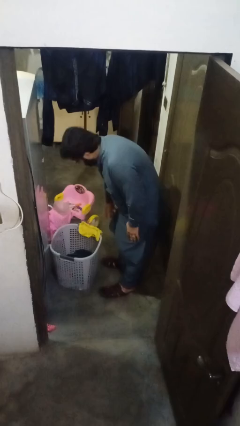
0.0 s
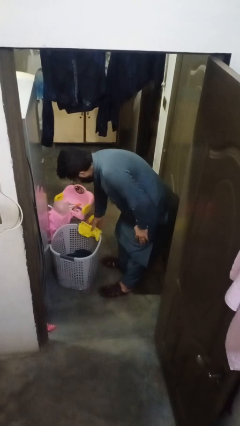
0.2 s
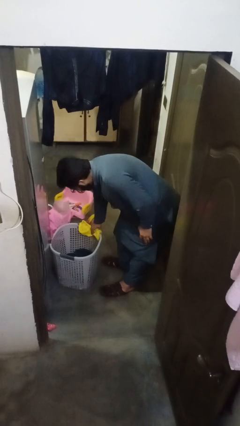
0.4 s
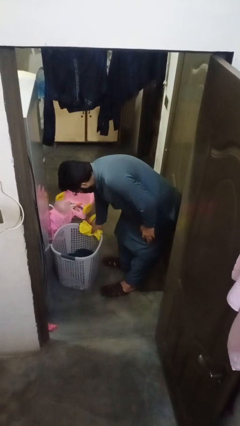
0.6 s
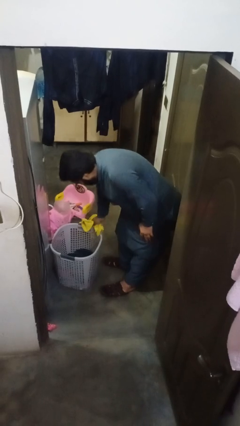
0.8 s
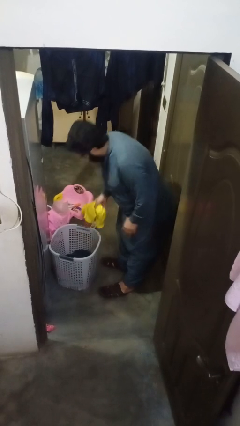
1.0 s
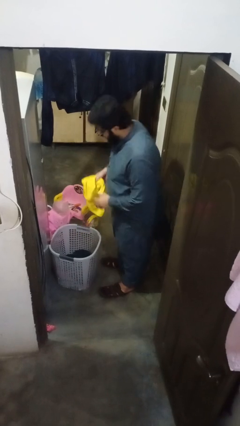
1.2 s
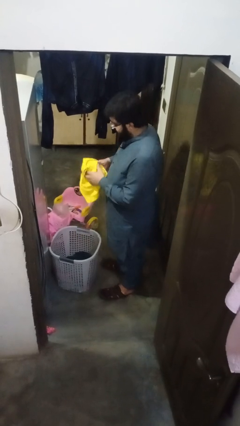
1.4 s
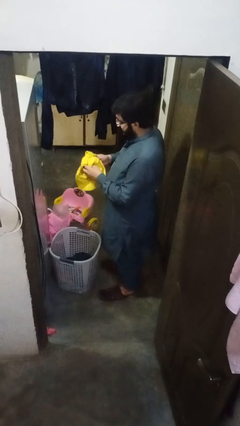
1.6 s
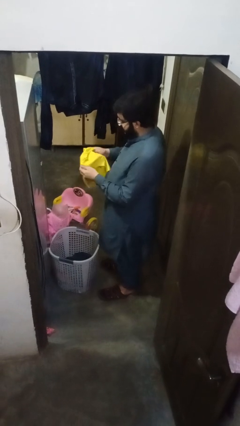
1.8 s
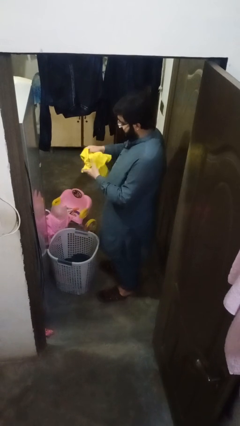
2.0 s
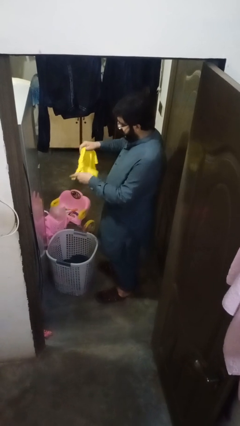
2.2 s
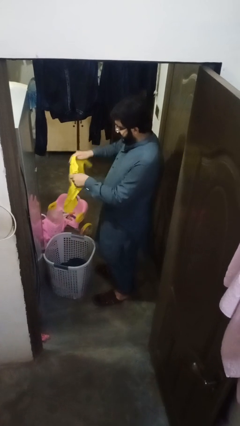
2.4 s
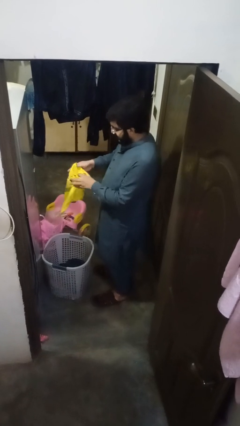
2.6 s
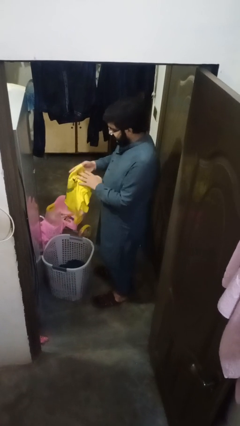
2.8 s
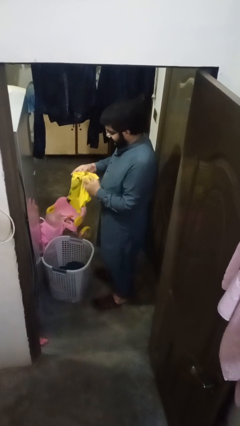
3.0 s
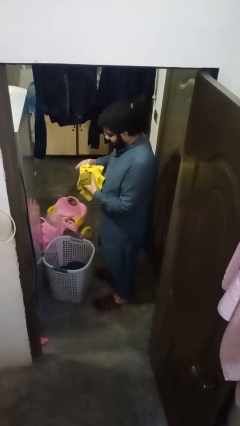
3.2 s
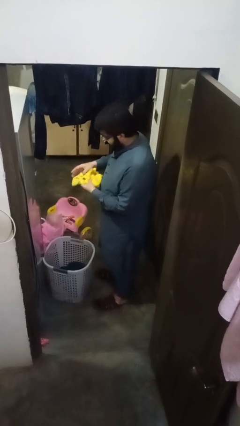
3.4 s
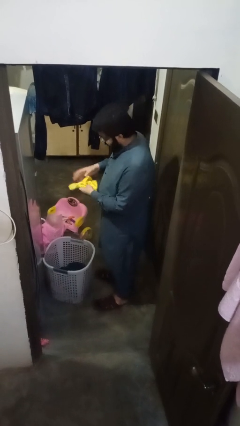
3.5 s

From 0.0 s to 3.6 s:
person folds shirt

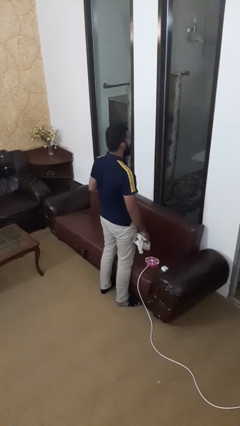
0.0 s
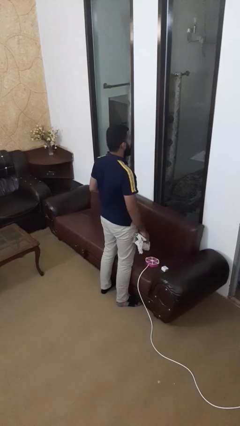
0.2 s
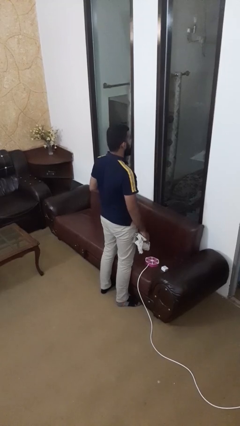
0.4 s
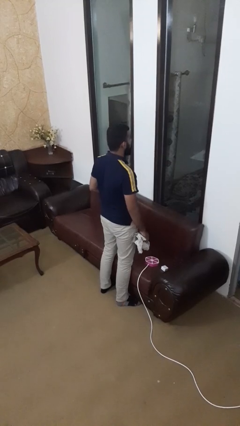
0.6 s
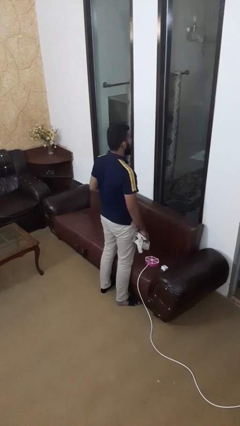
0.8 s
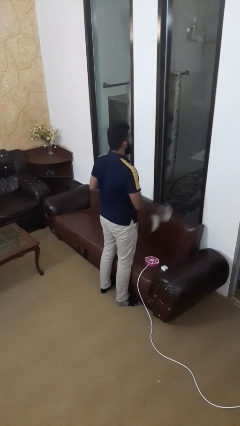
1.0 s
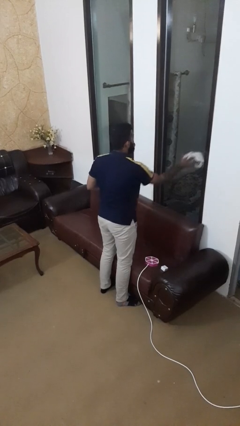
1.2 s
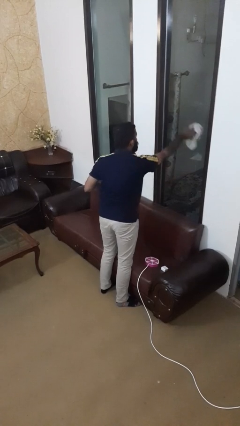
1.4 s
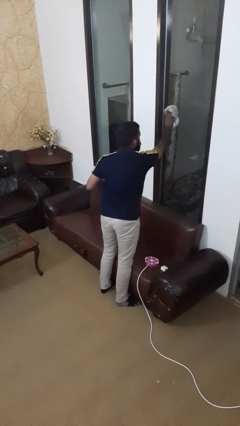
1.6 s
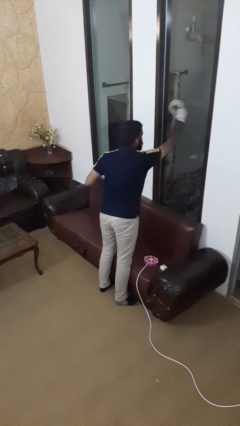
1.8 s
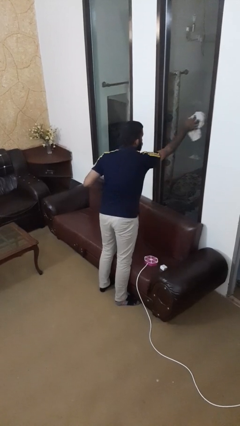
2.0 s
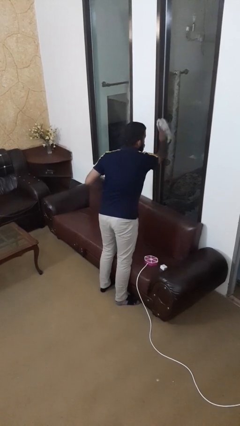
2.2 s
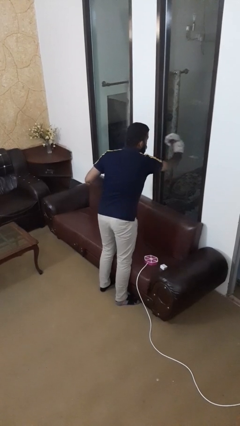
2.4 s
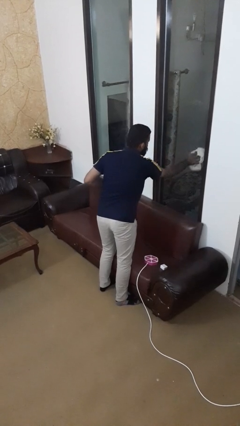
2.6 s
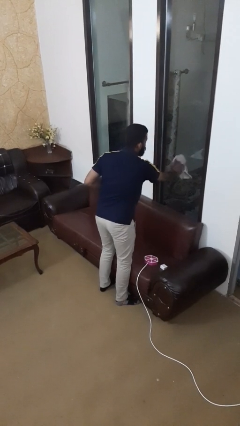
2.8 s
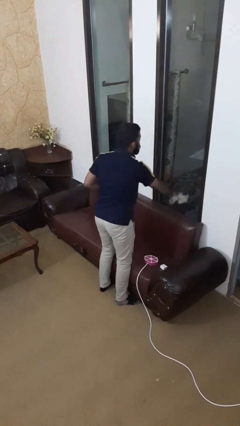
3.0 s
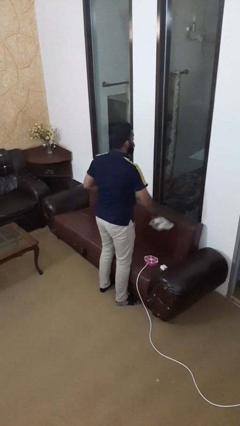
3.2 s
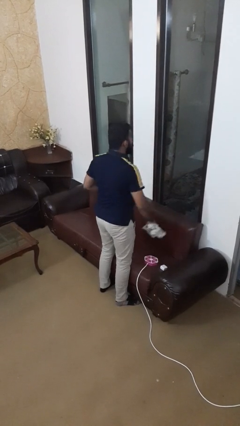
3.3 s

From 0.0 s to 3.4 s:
person washes window

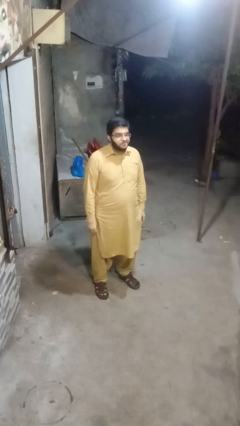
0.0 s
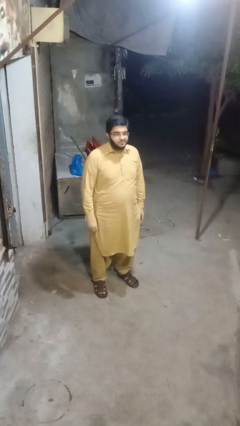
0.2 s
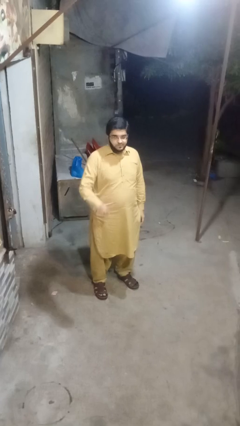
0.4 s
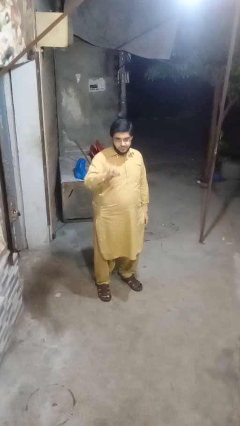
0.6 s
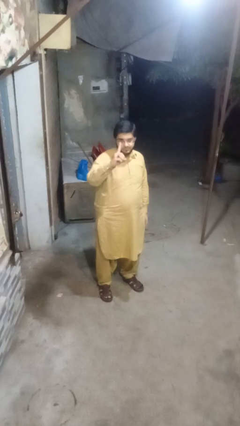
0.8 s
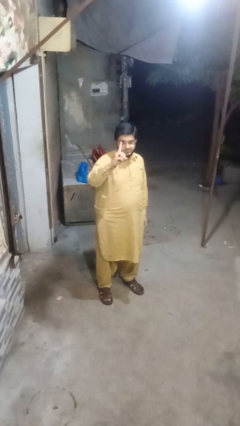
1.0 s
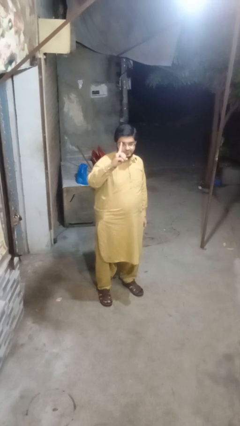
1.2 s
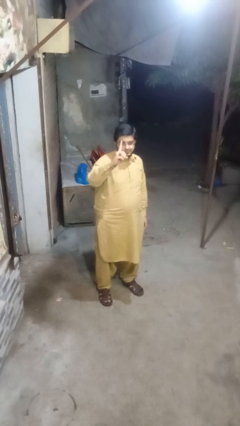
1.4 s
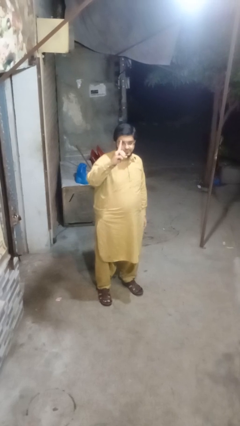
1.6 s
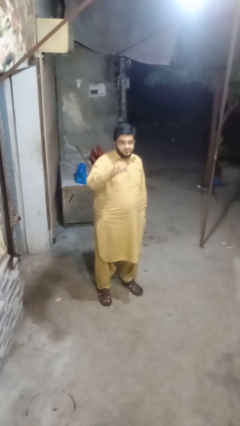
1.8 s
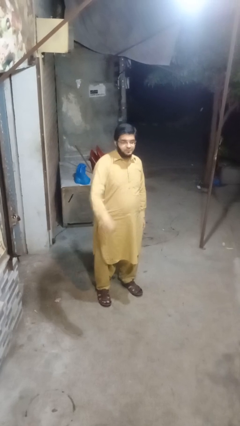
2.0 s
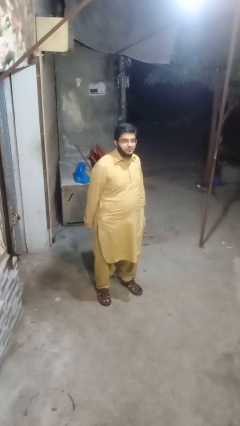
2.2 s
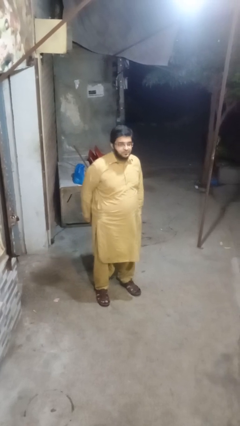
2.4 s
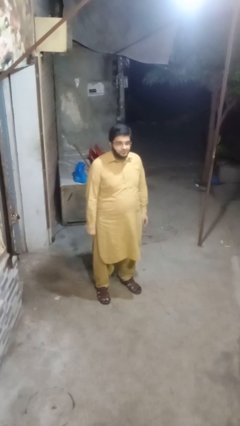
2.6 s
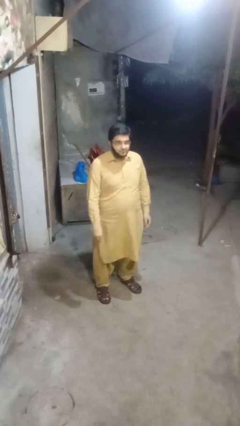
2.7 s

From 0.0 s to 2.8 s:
person gestures number one

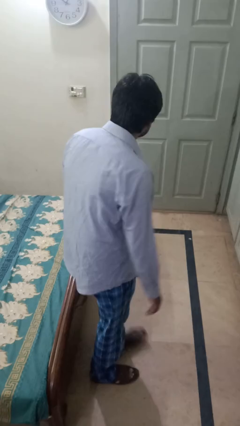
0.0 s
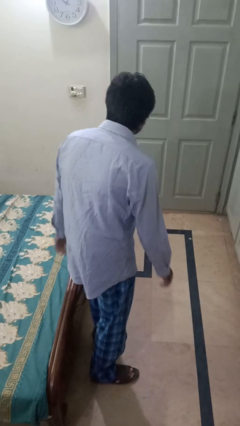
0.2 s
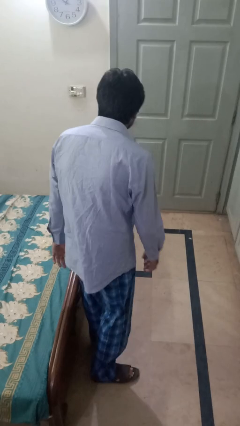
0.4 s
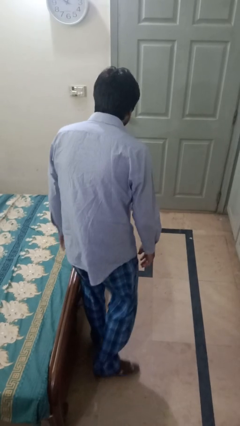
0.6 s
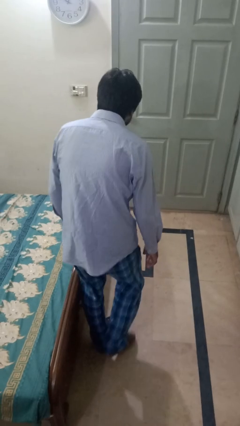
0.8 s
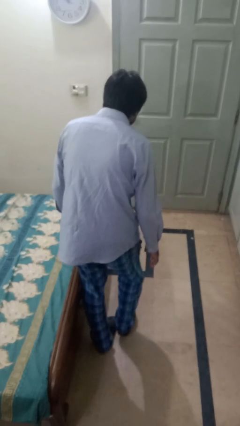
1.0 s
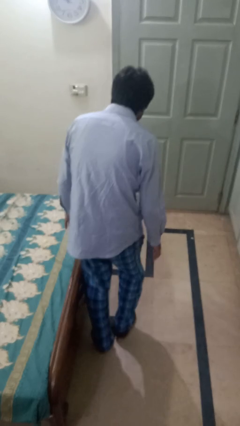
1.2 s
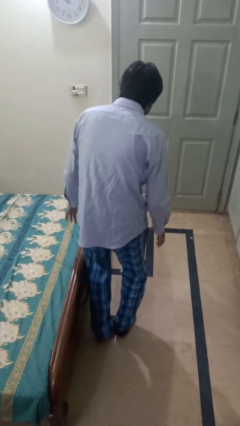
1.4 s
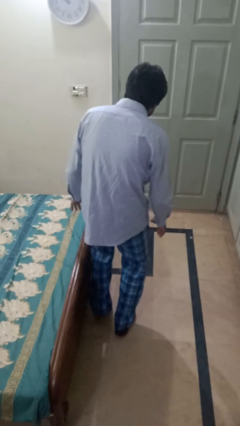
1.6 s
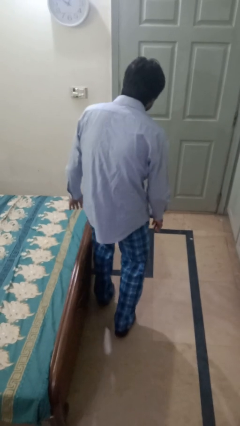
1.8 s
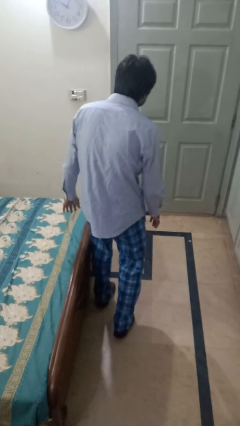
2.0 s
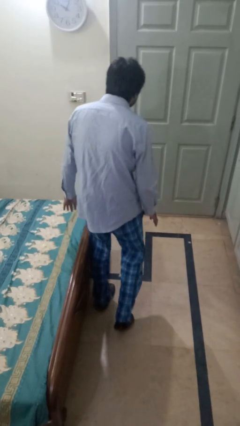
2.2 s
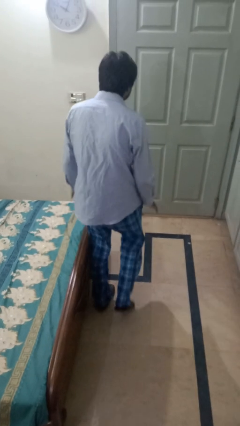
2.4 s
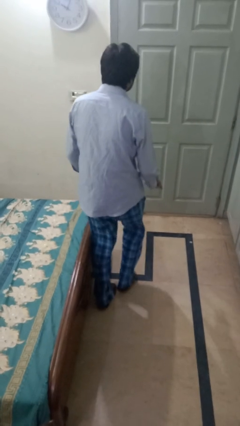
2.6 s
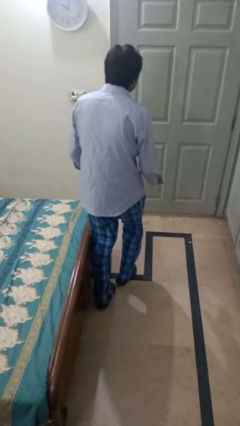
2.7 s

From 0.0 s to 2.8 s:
person walks tiptoe

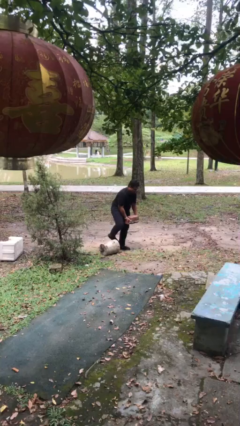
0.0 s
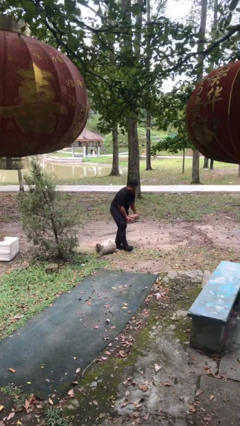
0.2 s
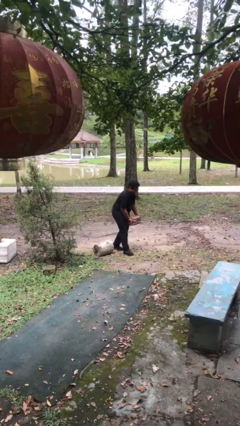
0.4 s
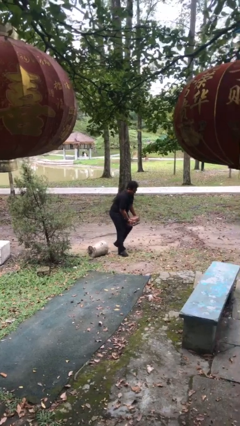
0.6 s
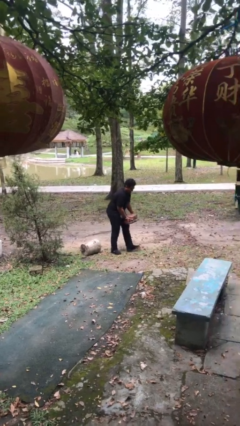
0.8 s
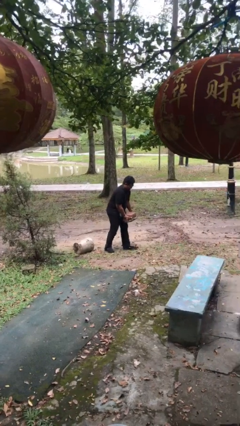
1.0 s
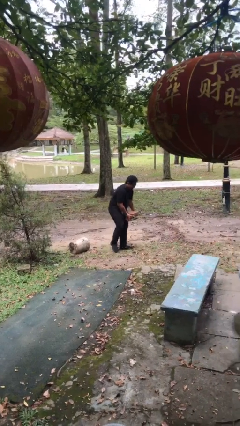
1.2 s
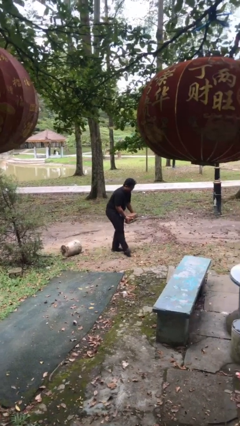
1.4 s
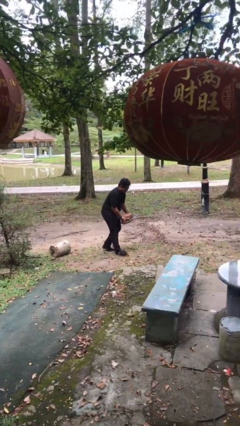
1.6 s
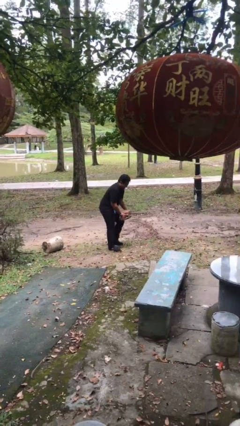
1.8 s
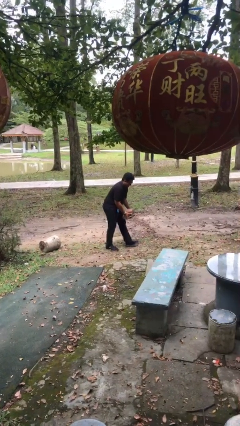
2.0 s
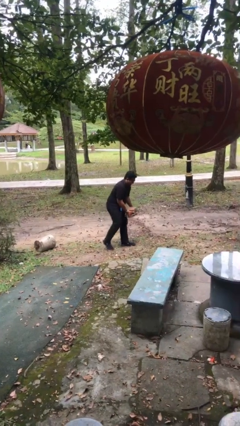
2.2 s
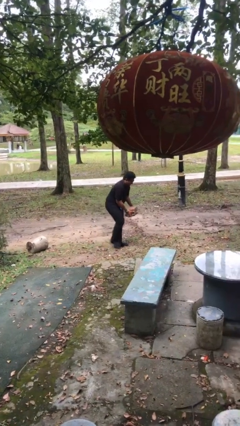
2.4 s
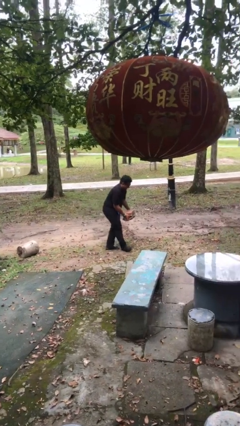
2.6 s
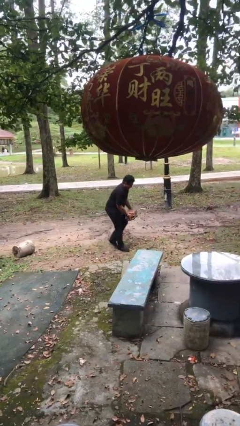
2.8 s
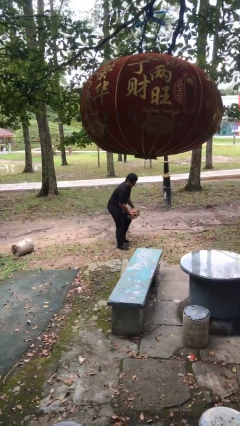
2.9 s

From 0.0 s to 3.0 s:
person carries heavy object

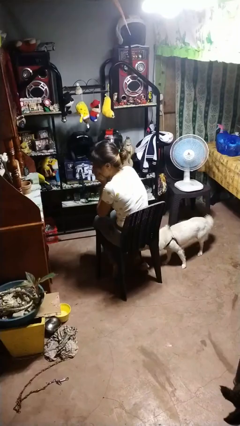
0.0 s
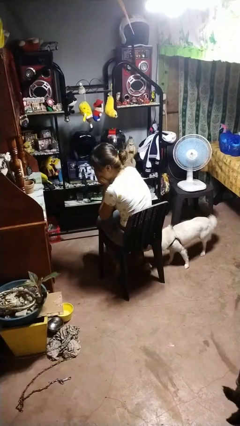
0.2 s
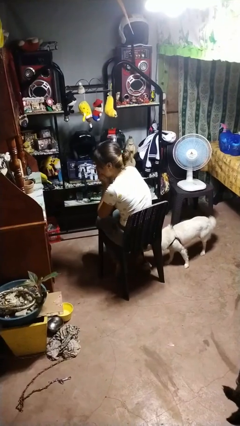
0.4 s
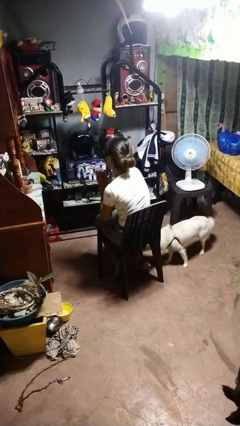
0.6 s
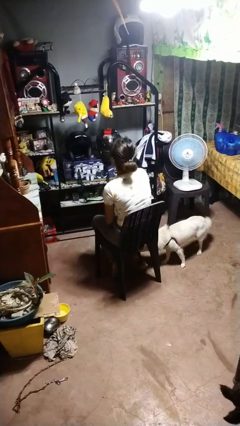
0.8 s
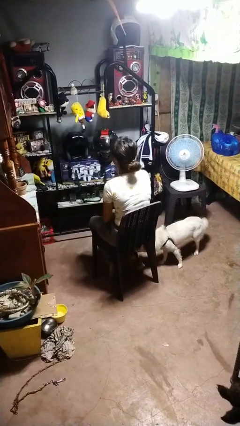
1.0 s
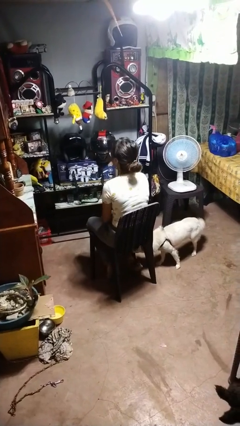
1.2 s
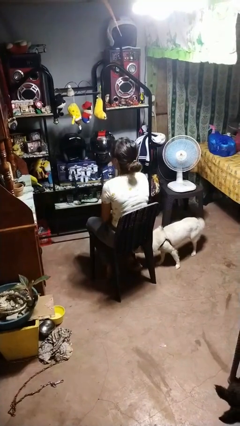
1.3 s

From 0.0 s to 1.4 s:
person sneezes into hand

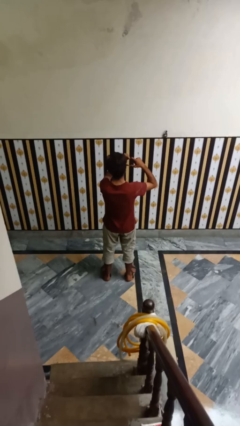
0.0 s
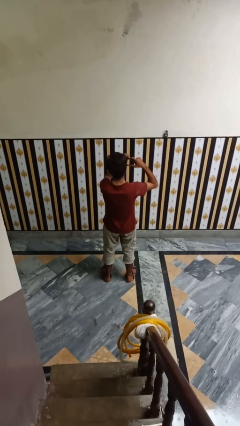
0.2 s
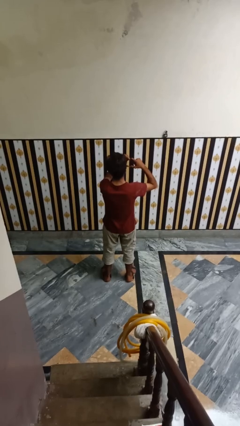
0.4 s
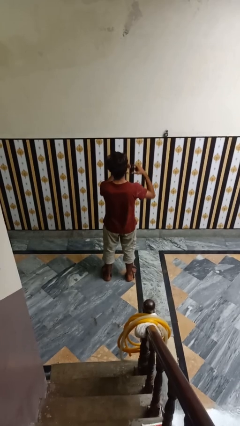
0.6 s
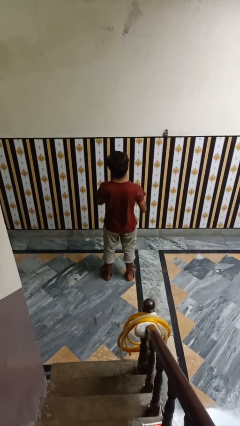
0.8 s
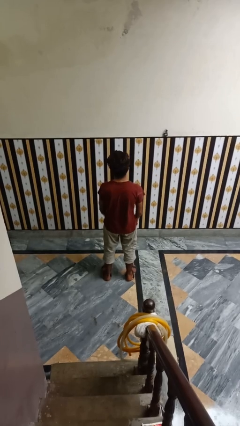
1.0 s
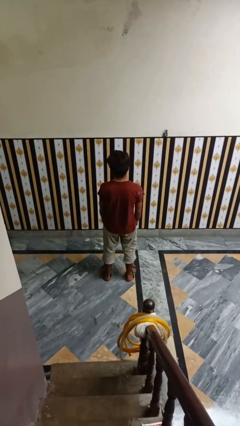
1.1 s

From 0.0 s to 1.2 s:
person gestures heart
